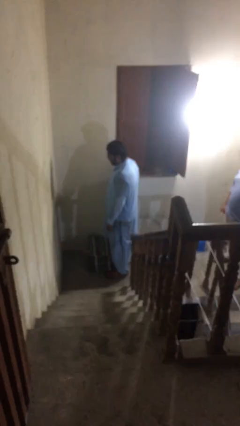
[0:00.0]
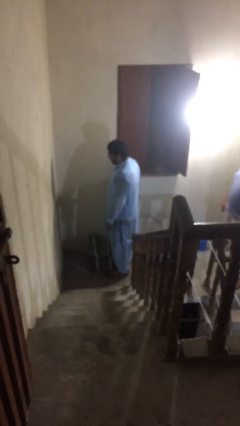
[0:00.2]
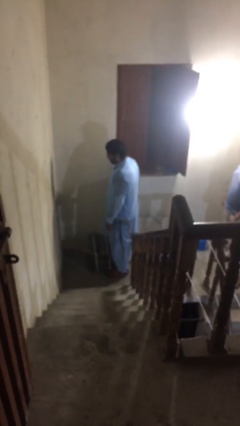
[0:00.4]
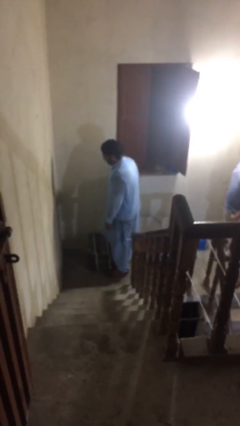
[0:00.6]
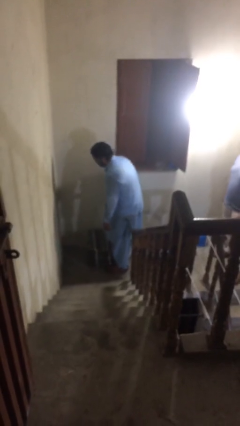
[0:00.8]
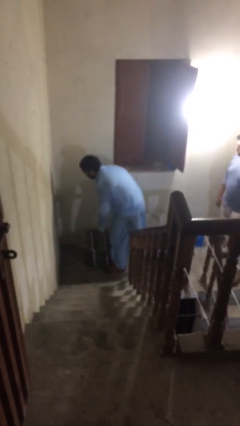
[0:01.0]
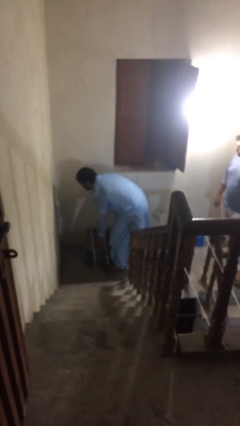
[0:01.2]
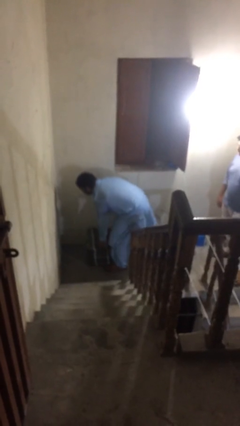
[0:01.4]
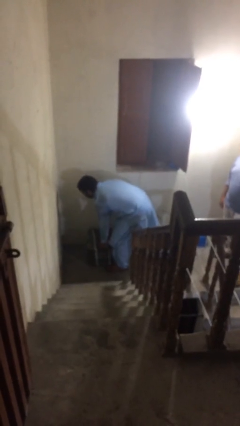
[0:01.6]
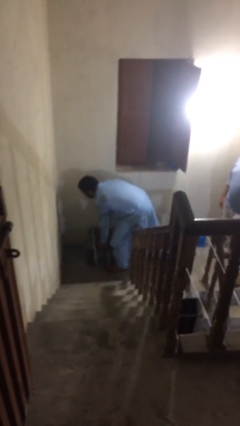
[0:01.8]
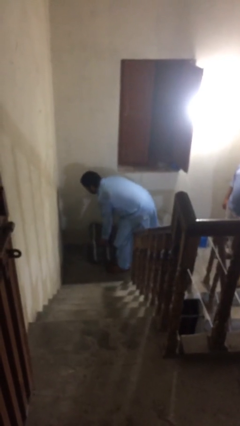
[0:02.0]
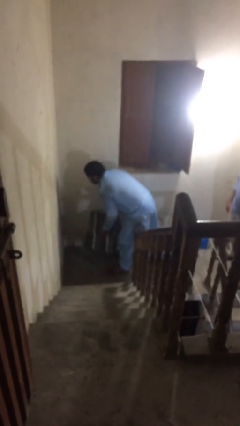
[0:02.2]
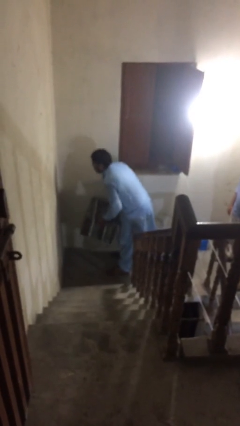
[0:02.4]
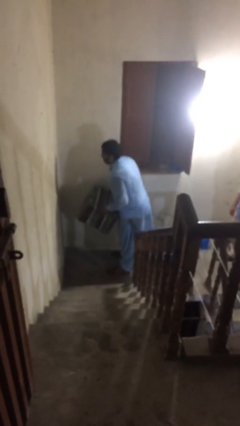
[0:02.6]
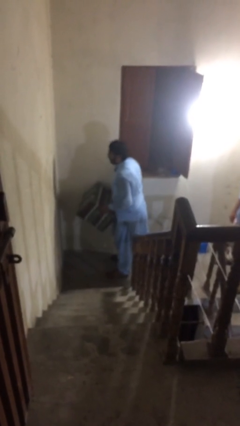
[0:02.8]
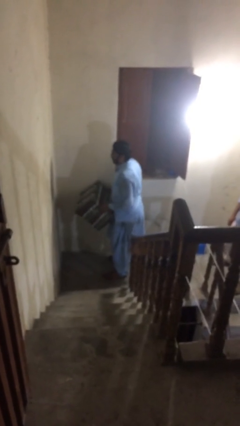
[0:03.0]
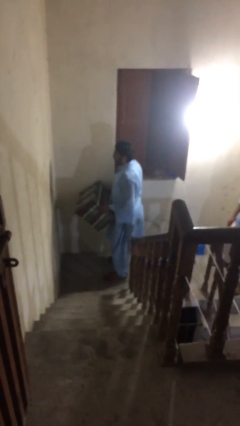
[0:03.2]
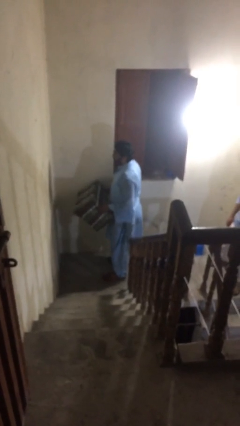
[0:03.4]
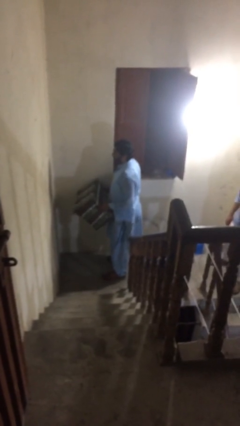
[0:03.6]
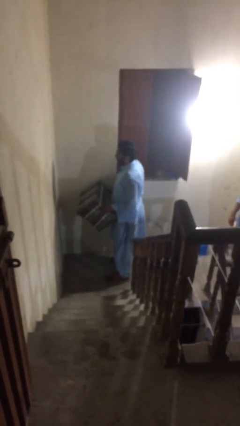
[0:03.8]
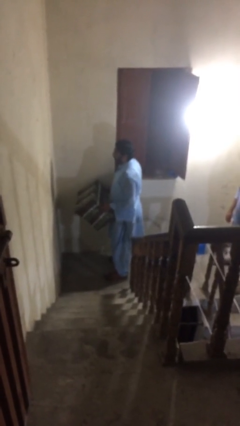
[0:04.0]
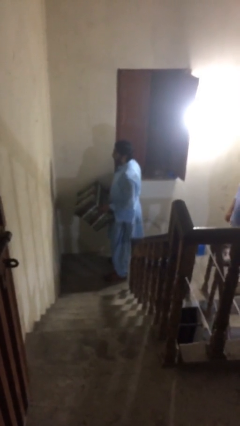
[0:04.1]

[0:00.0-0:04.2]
person picks up object from floor

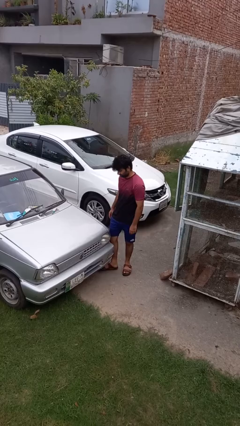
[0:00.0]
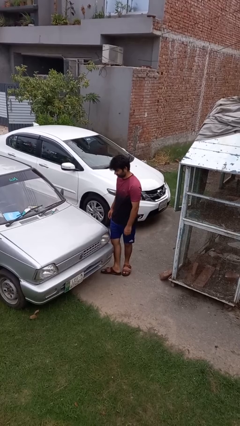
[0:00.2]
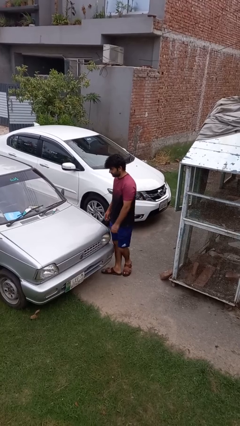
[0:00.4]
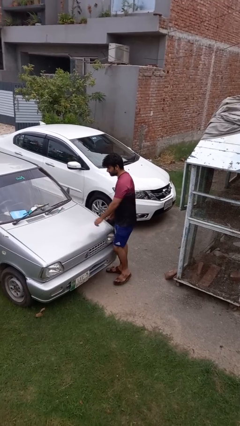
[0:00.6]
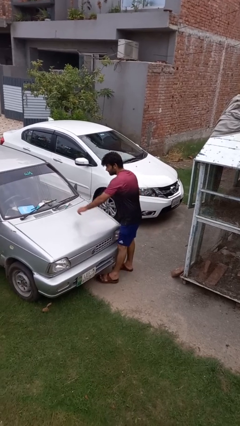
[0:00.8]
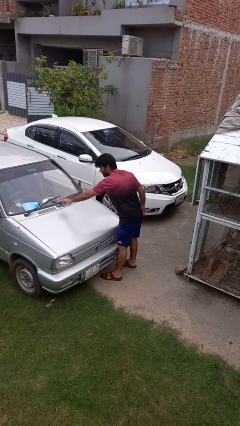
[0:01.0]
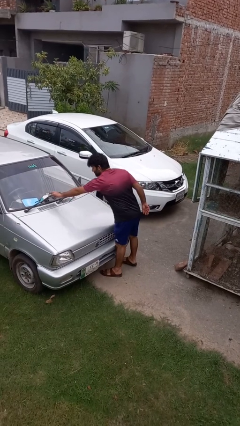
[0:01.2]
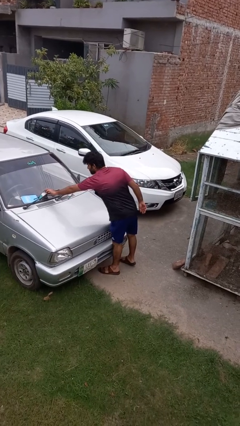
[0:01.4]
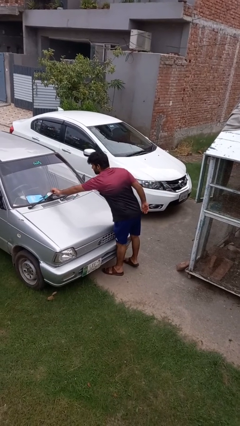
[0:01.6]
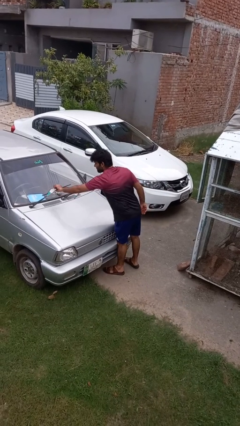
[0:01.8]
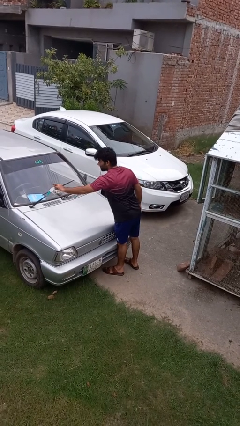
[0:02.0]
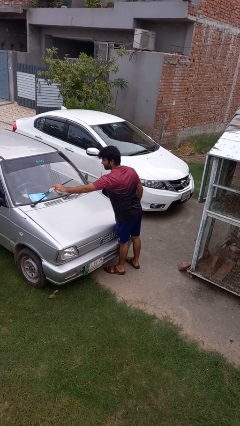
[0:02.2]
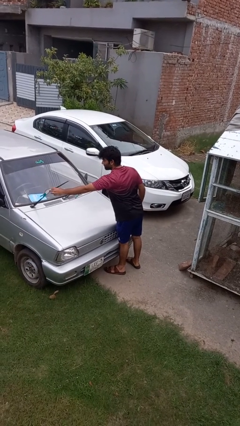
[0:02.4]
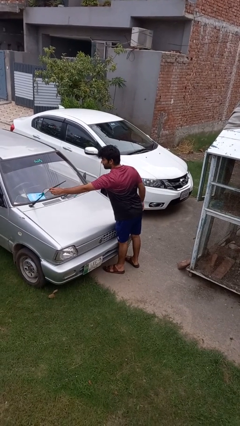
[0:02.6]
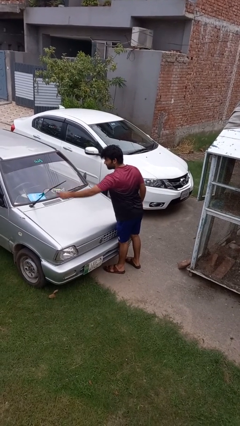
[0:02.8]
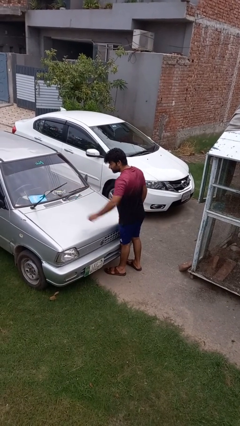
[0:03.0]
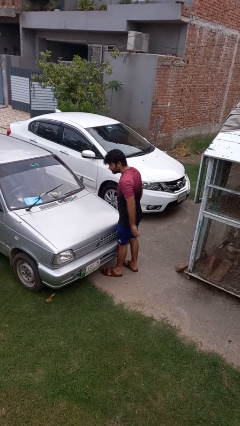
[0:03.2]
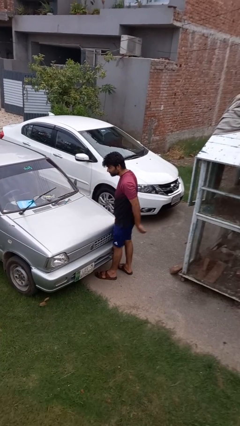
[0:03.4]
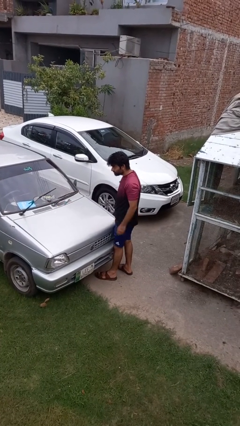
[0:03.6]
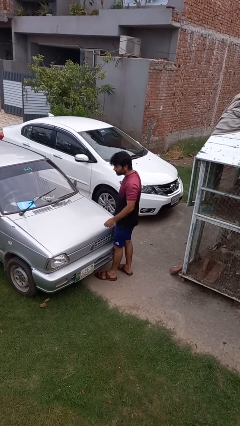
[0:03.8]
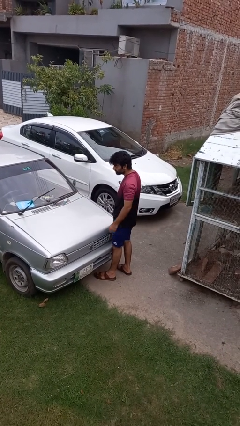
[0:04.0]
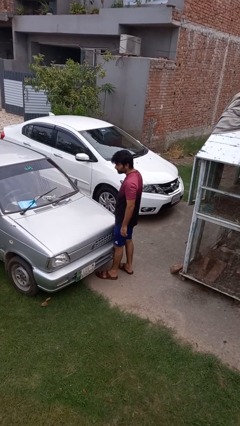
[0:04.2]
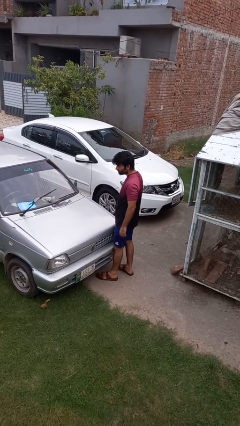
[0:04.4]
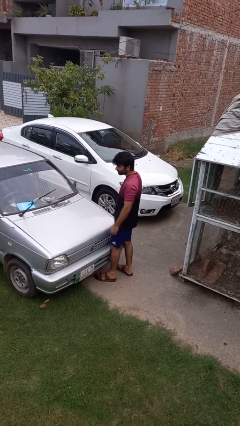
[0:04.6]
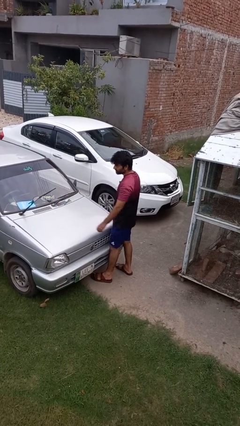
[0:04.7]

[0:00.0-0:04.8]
person flips up car wipers

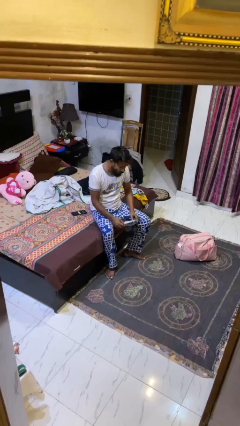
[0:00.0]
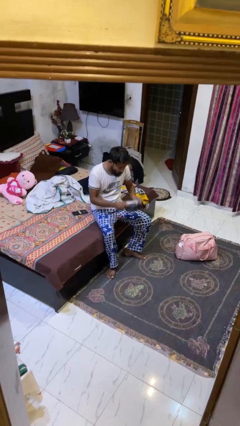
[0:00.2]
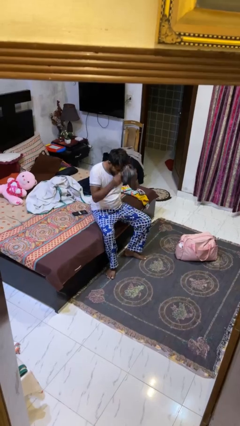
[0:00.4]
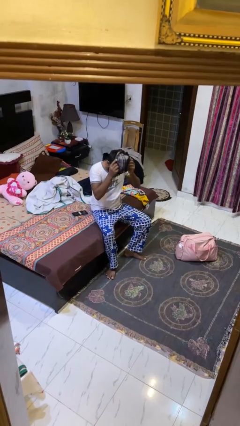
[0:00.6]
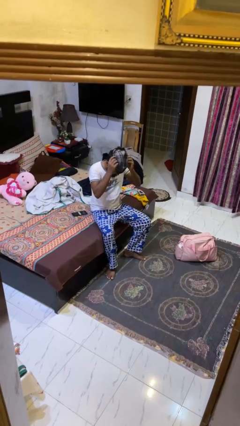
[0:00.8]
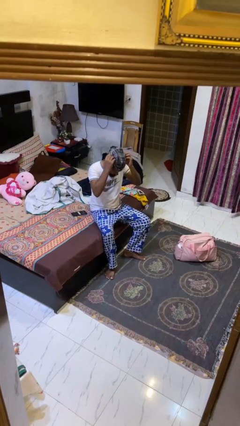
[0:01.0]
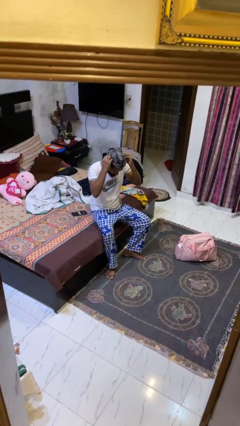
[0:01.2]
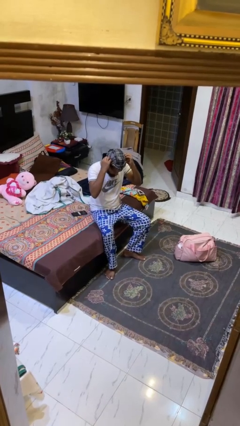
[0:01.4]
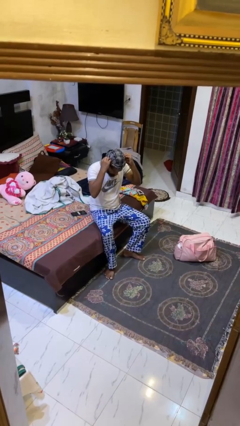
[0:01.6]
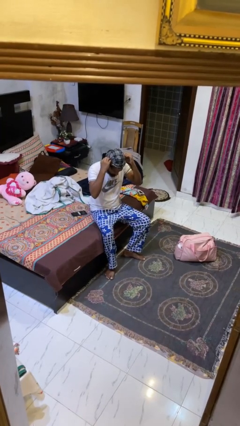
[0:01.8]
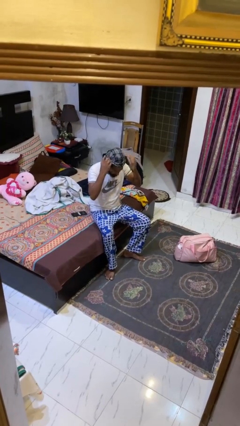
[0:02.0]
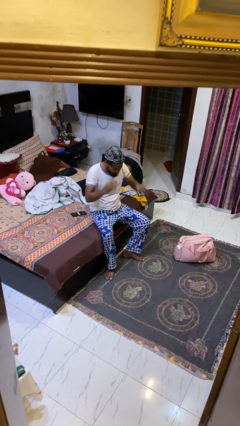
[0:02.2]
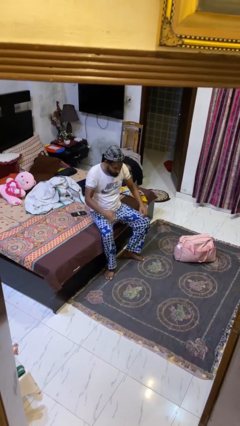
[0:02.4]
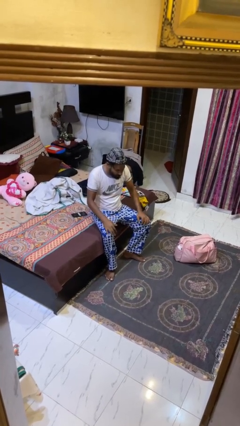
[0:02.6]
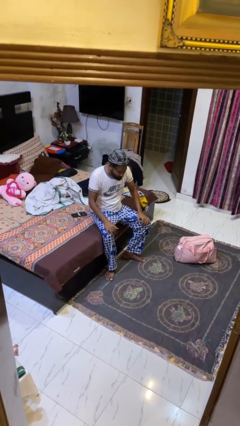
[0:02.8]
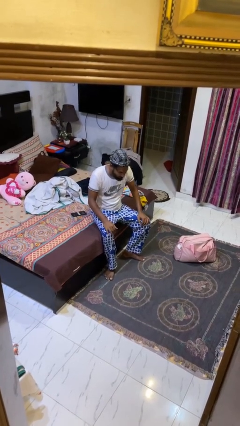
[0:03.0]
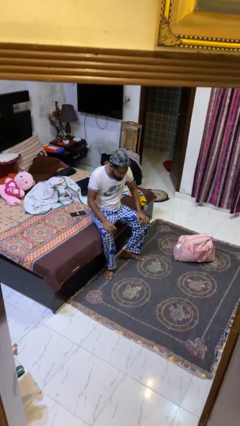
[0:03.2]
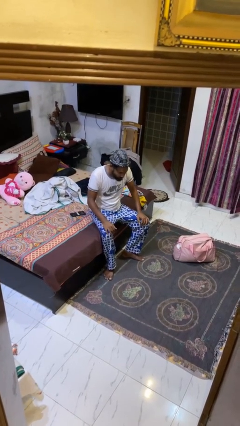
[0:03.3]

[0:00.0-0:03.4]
person puts on hat

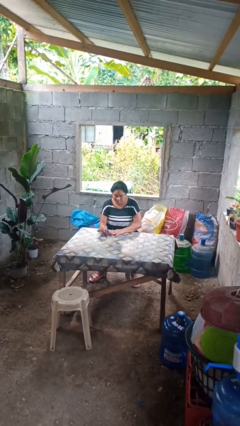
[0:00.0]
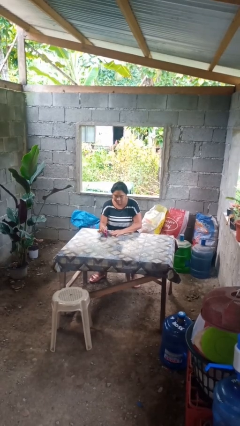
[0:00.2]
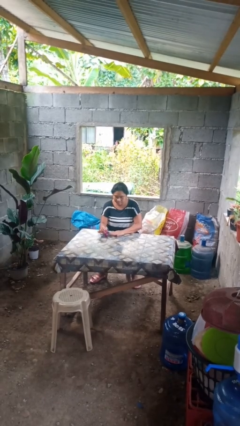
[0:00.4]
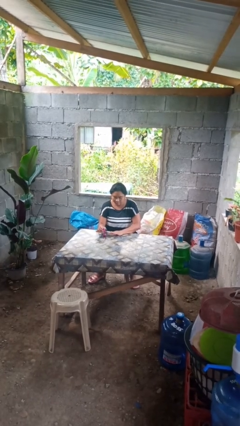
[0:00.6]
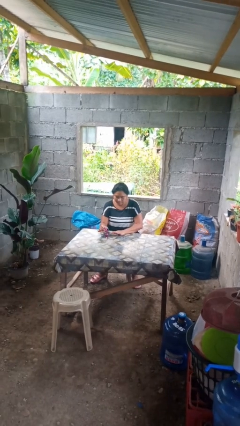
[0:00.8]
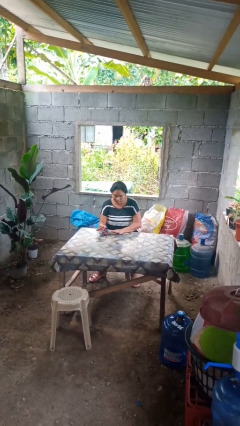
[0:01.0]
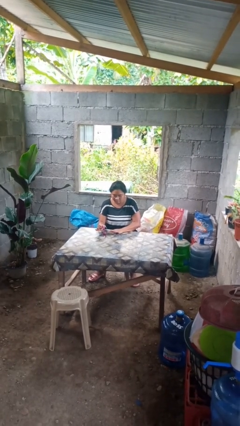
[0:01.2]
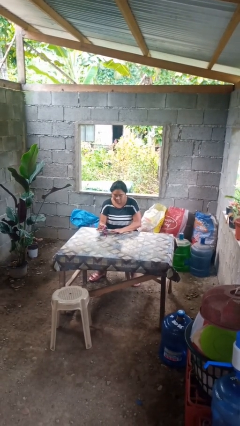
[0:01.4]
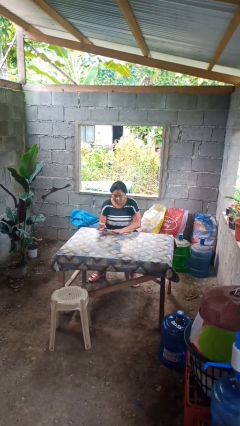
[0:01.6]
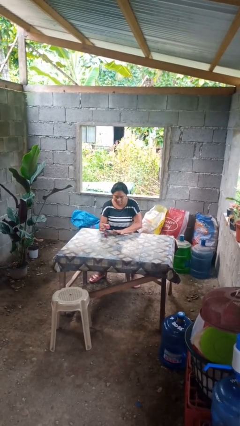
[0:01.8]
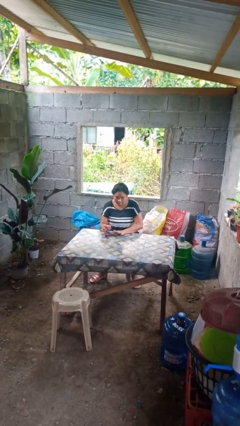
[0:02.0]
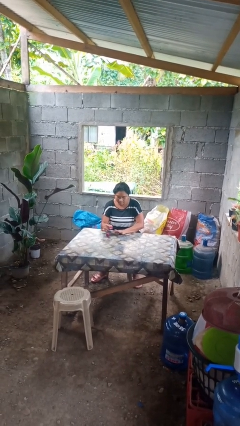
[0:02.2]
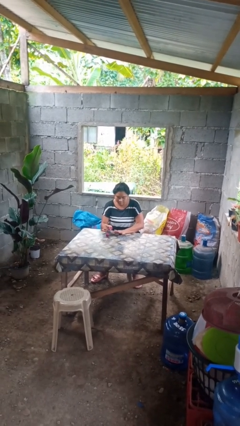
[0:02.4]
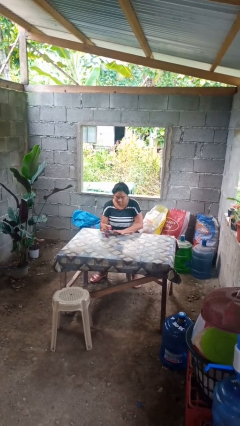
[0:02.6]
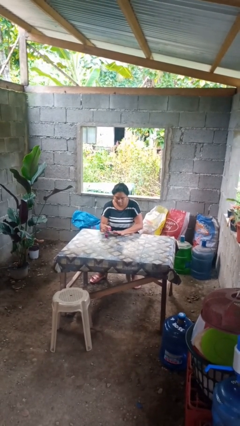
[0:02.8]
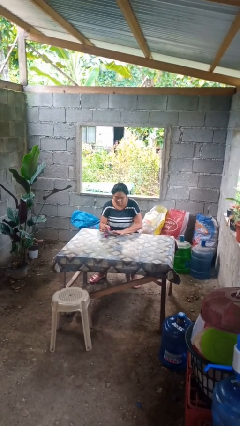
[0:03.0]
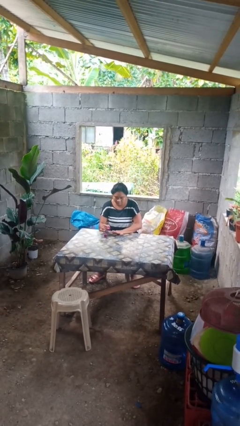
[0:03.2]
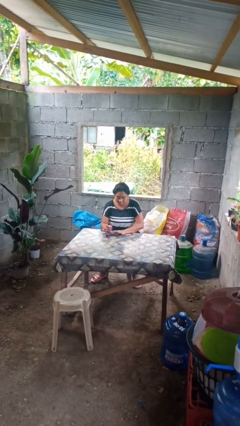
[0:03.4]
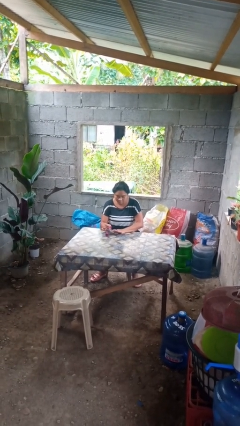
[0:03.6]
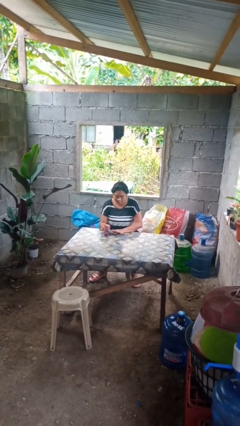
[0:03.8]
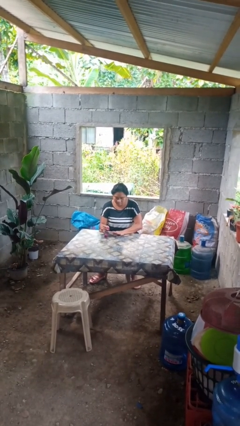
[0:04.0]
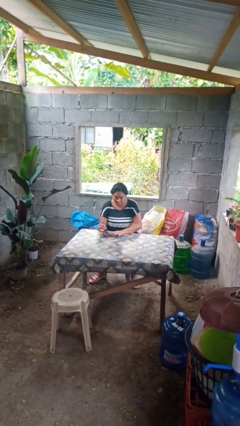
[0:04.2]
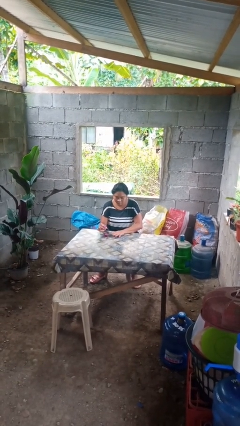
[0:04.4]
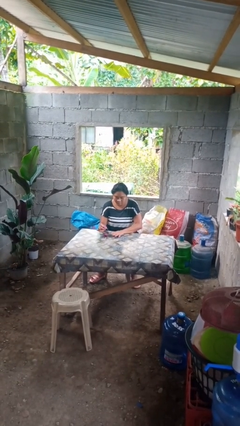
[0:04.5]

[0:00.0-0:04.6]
person paints fingernails

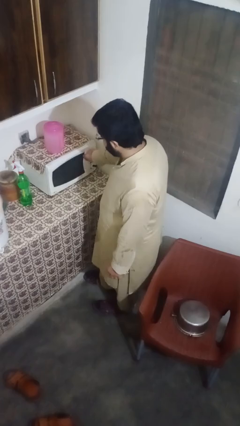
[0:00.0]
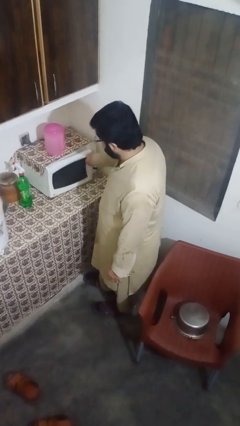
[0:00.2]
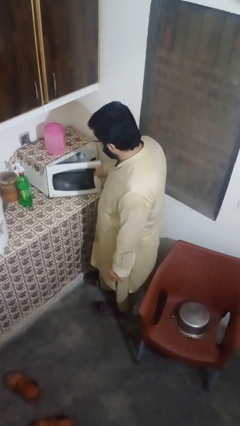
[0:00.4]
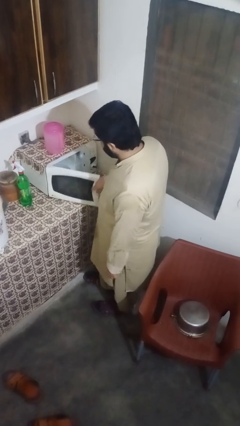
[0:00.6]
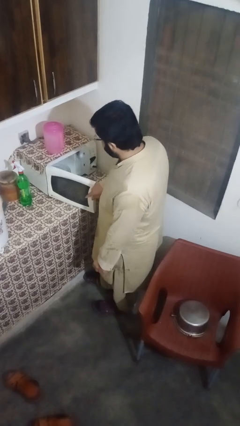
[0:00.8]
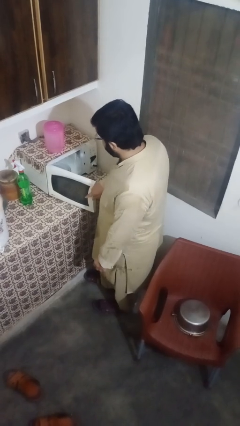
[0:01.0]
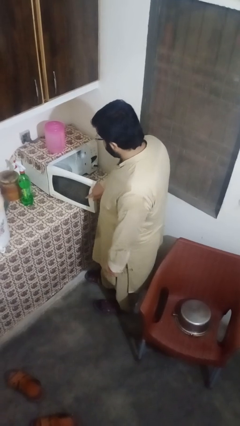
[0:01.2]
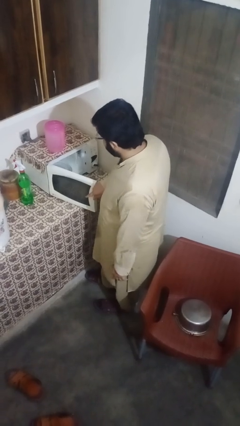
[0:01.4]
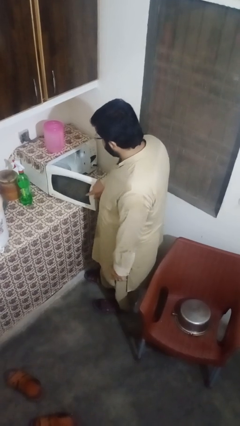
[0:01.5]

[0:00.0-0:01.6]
person opens microwave
